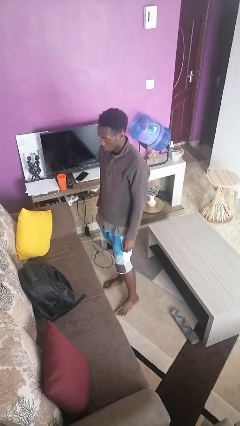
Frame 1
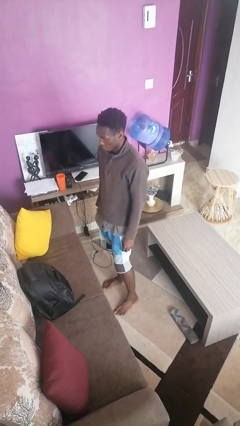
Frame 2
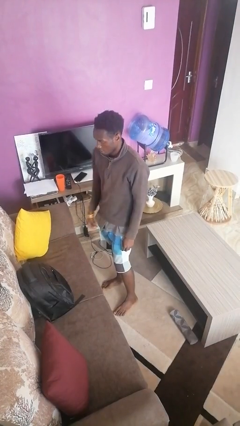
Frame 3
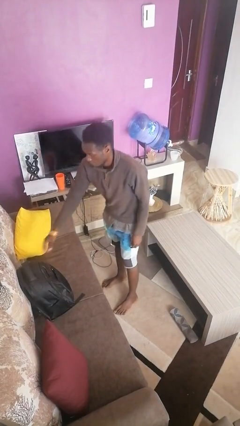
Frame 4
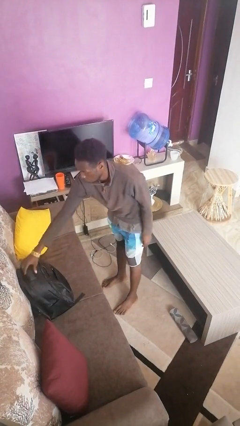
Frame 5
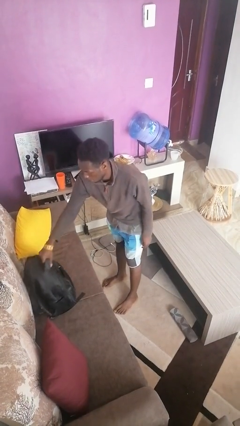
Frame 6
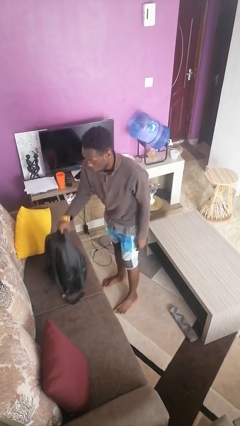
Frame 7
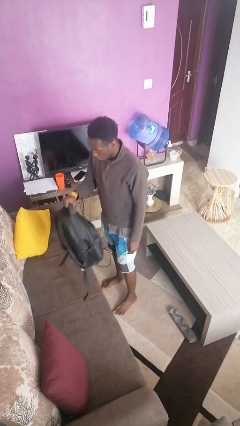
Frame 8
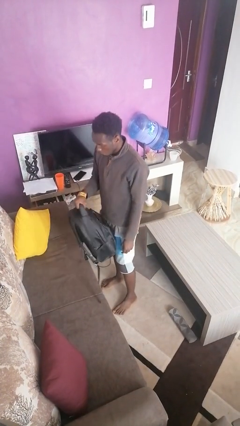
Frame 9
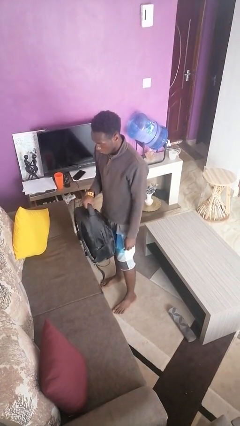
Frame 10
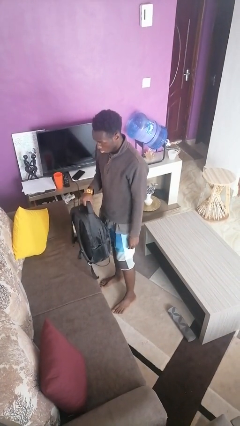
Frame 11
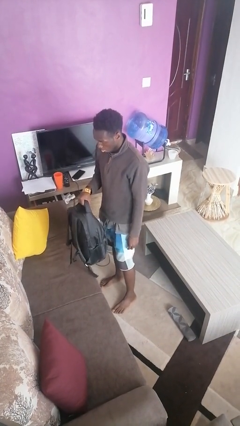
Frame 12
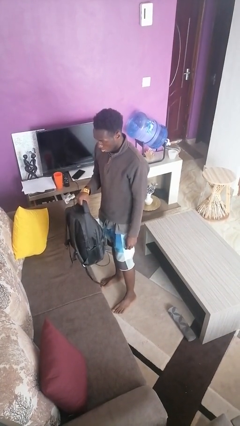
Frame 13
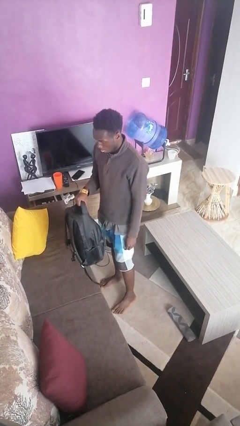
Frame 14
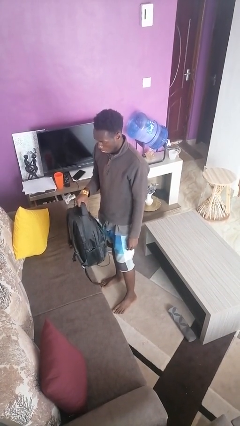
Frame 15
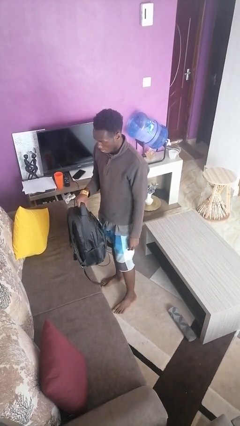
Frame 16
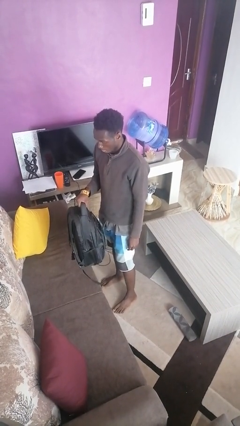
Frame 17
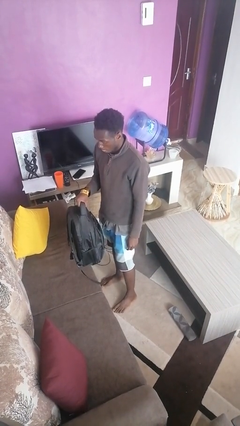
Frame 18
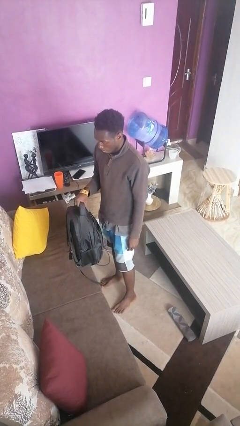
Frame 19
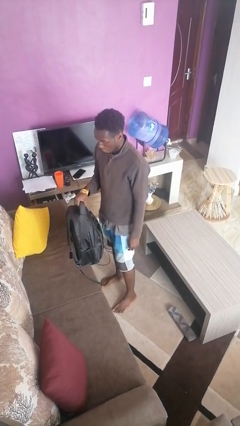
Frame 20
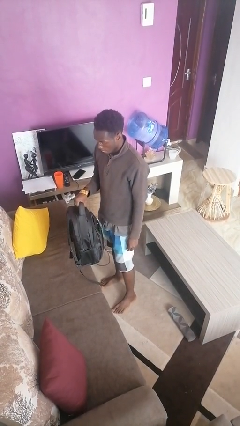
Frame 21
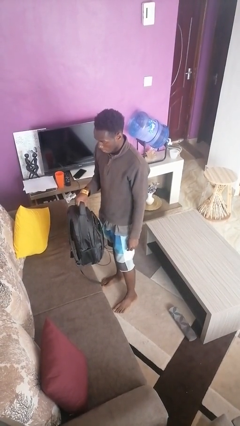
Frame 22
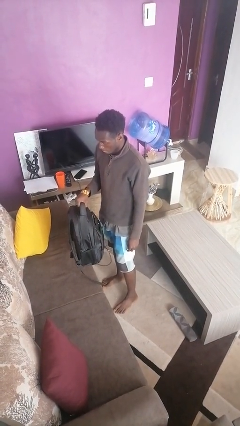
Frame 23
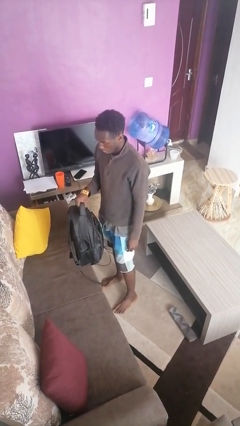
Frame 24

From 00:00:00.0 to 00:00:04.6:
person picks up object from couch

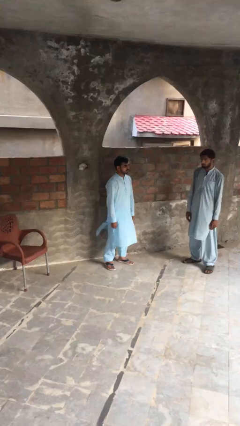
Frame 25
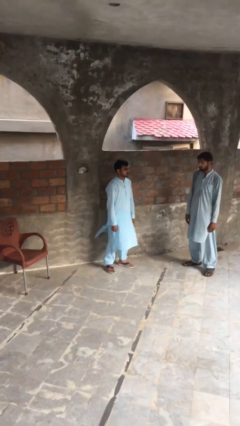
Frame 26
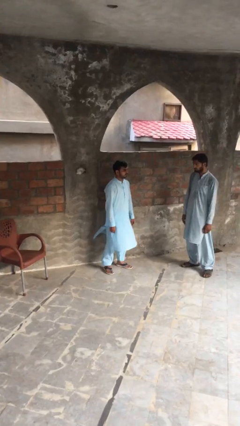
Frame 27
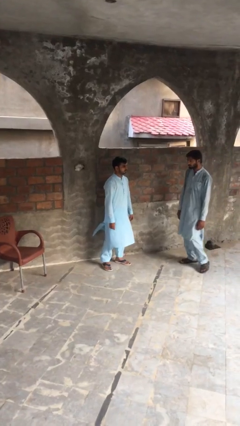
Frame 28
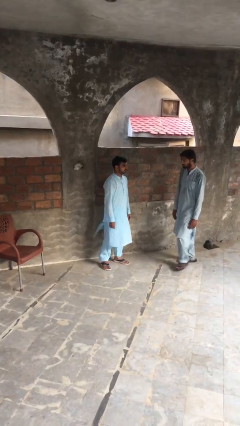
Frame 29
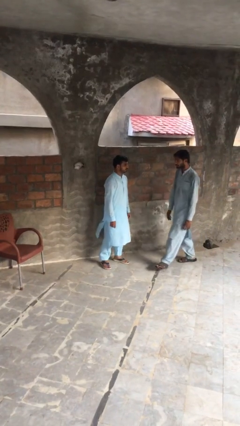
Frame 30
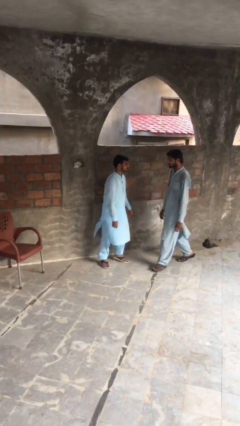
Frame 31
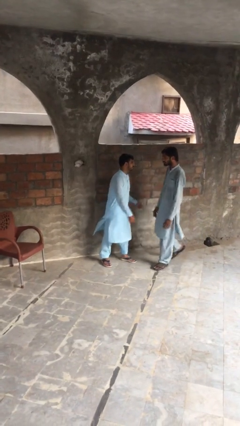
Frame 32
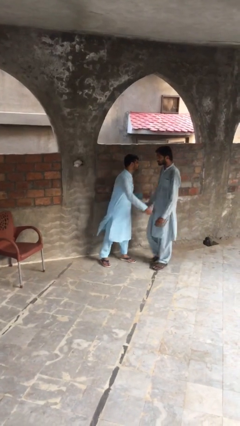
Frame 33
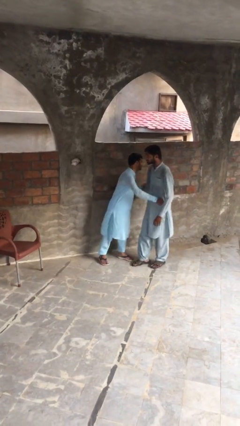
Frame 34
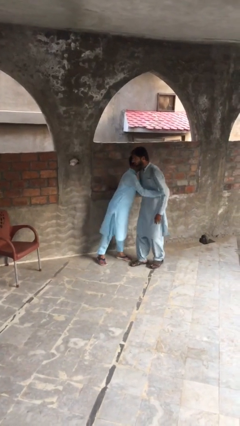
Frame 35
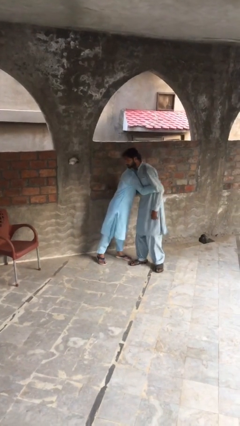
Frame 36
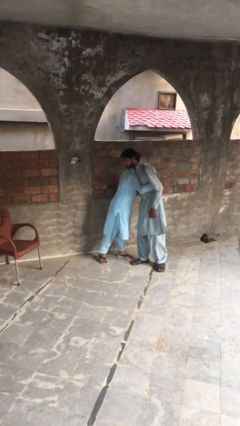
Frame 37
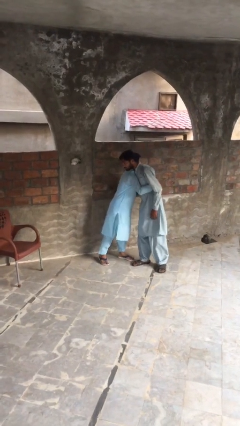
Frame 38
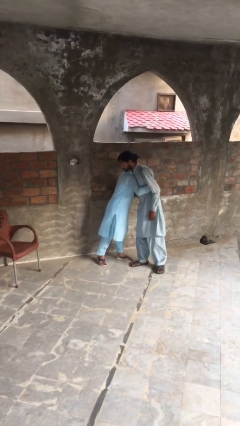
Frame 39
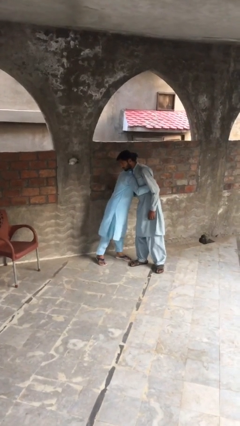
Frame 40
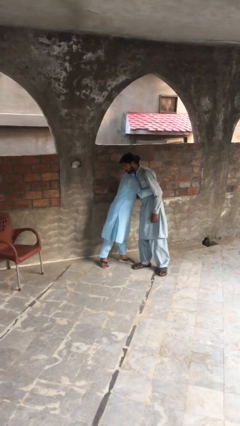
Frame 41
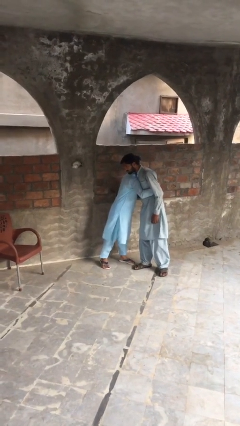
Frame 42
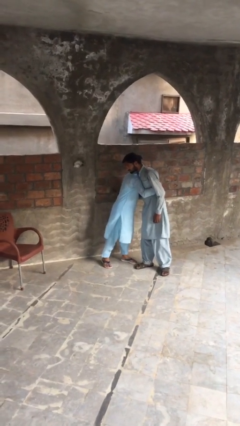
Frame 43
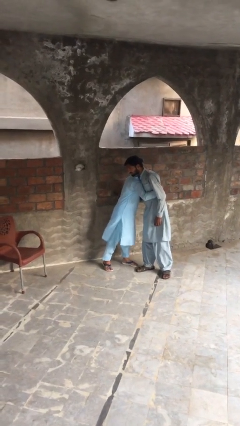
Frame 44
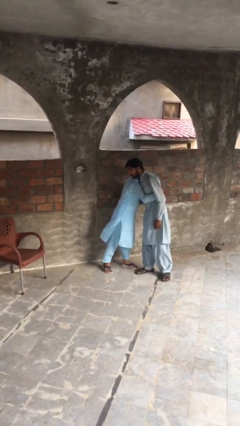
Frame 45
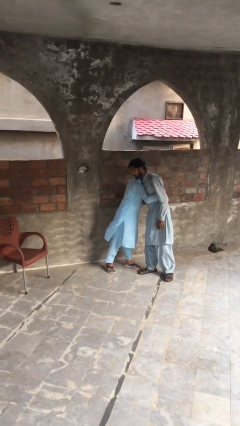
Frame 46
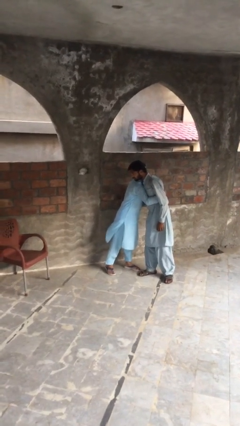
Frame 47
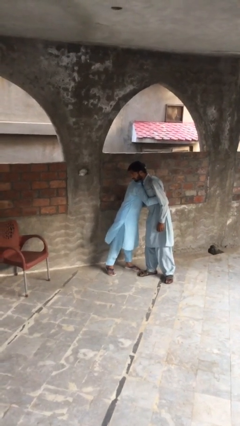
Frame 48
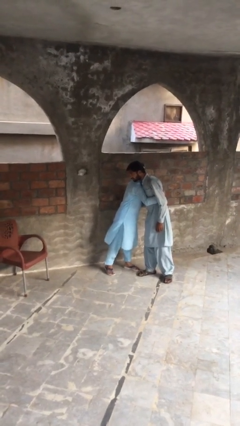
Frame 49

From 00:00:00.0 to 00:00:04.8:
person embraces person

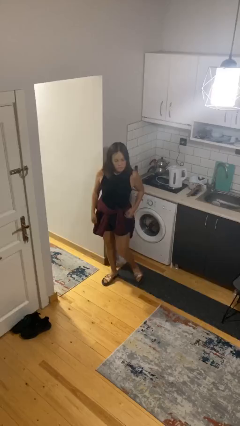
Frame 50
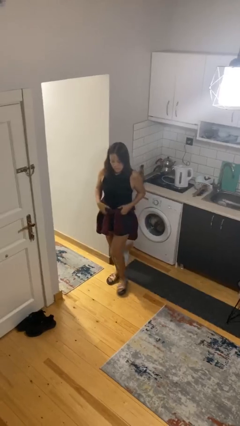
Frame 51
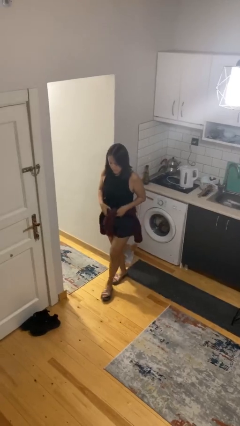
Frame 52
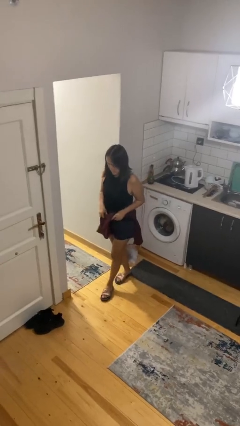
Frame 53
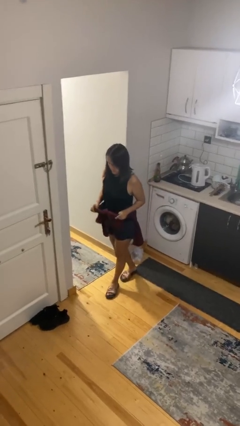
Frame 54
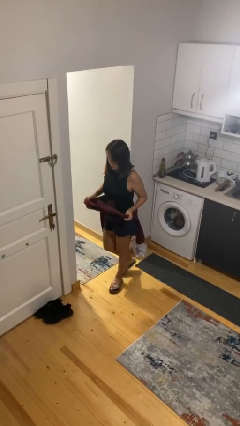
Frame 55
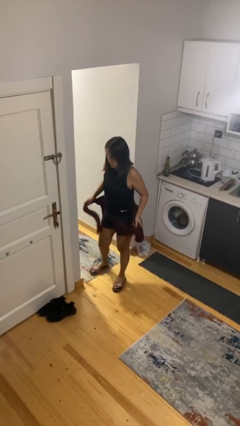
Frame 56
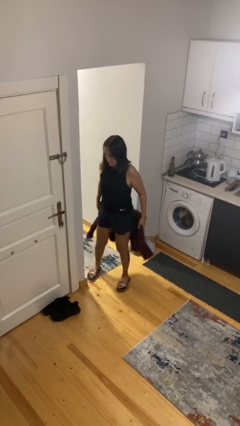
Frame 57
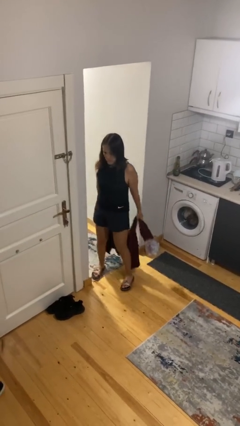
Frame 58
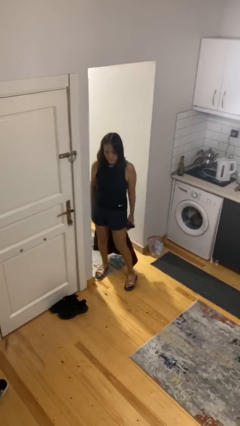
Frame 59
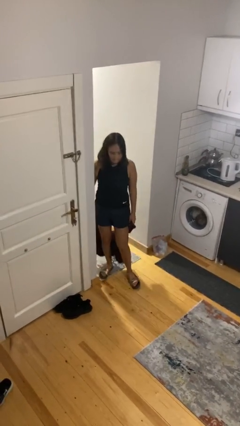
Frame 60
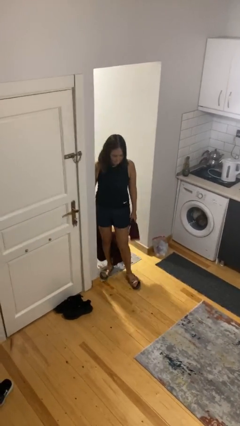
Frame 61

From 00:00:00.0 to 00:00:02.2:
person unties jacket around waist

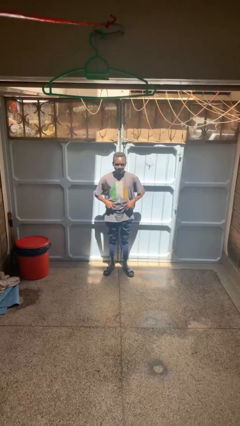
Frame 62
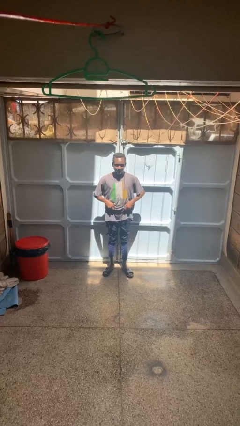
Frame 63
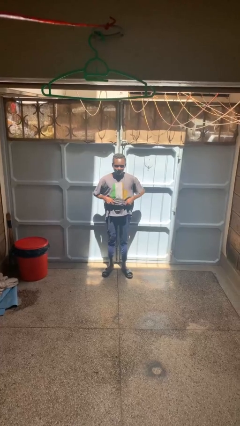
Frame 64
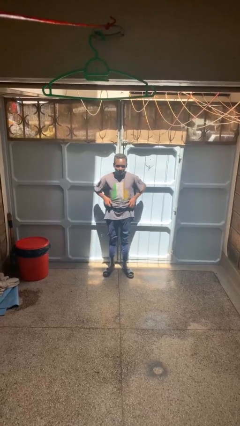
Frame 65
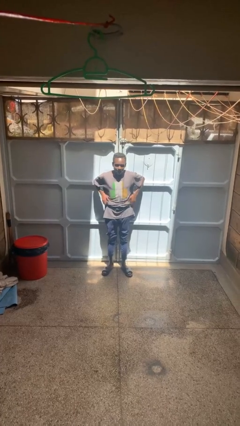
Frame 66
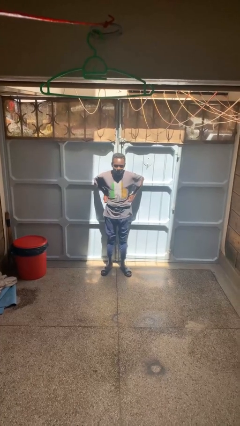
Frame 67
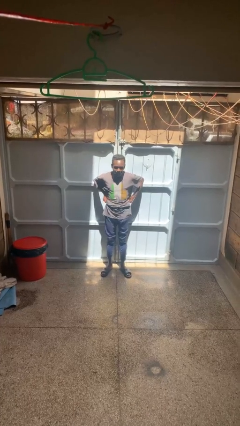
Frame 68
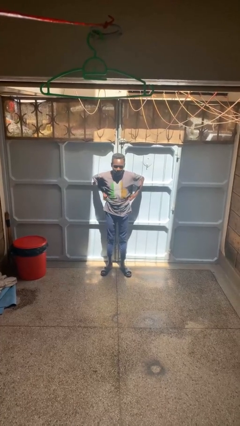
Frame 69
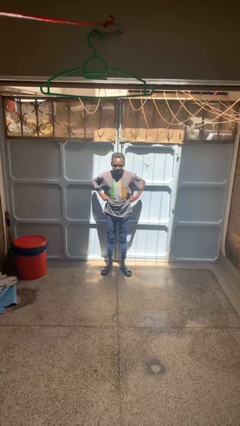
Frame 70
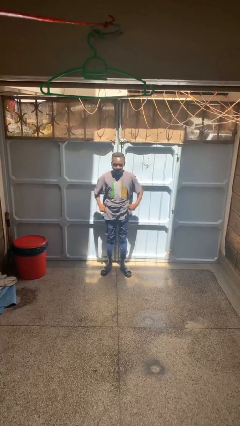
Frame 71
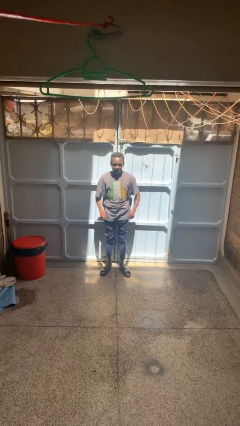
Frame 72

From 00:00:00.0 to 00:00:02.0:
person hikes up pants

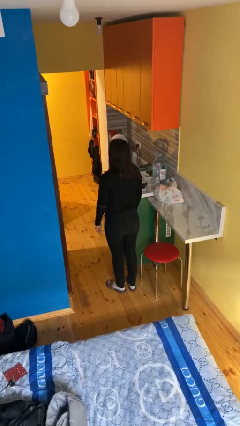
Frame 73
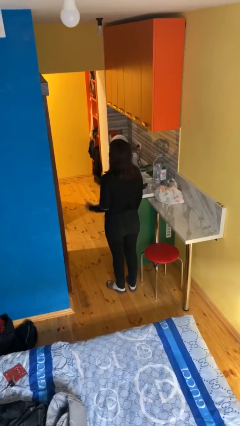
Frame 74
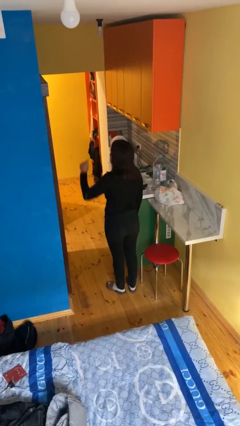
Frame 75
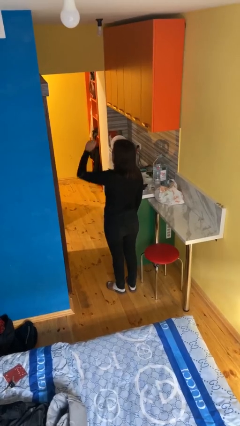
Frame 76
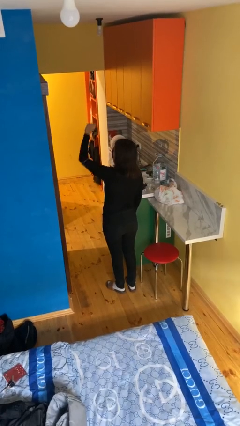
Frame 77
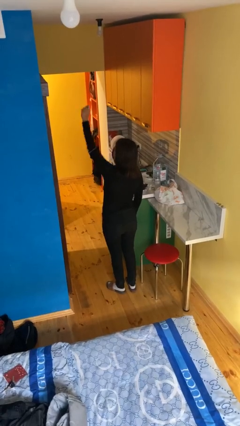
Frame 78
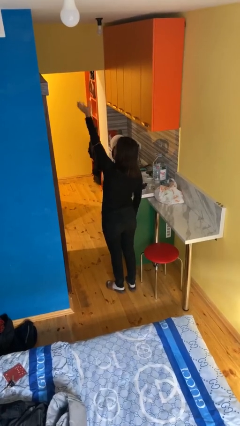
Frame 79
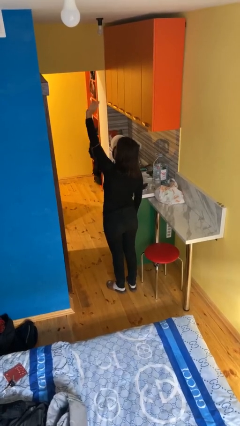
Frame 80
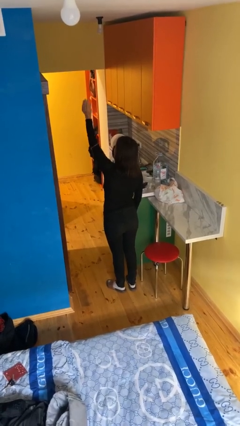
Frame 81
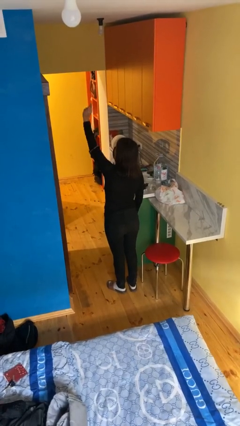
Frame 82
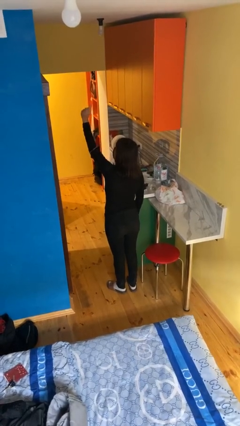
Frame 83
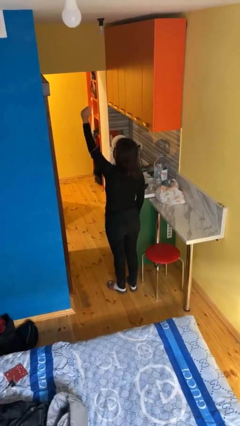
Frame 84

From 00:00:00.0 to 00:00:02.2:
person gestures raise hand

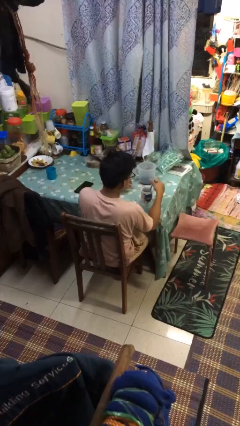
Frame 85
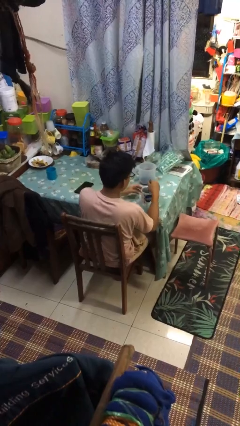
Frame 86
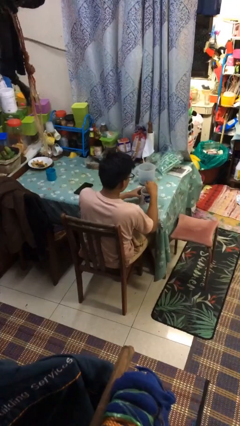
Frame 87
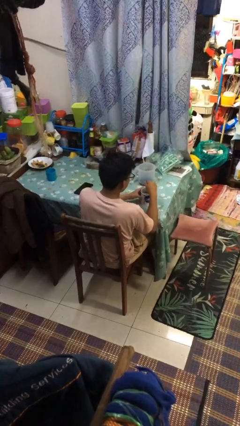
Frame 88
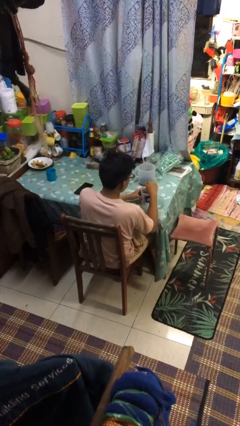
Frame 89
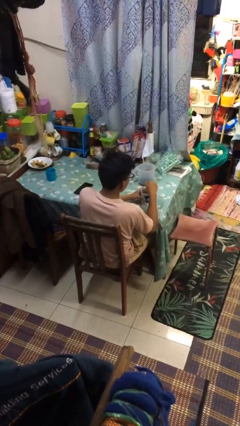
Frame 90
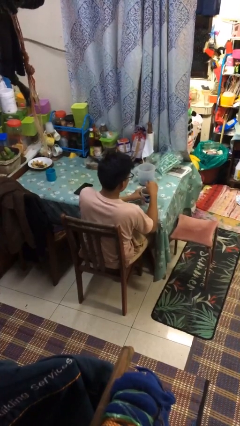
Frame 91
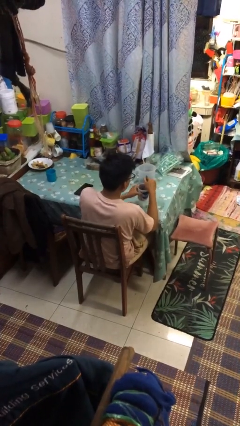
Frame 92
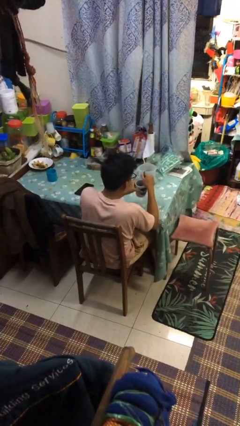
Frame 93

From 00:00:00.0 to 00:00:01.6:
person stirs mug
